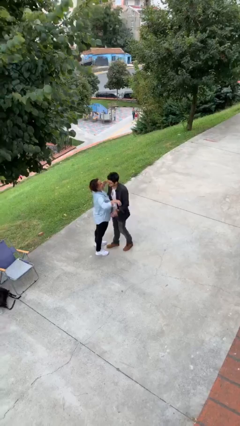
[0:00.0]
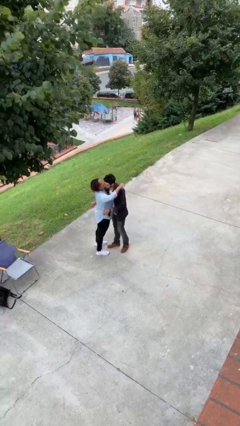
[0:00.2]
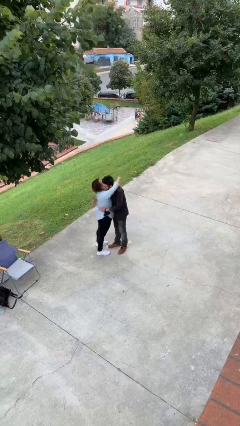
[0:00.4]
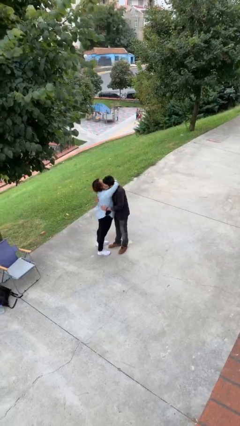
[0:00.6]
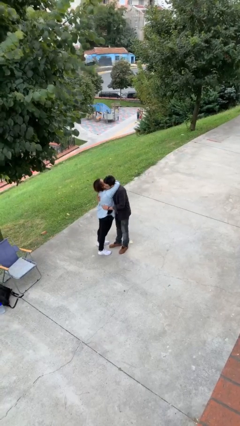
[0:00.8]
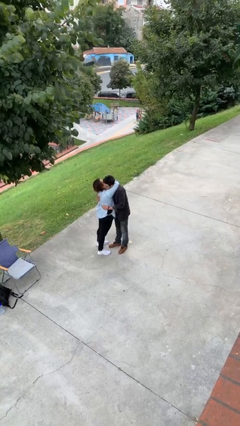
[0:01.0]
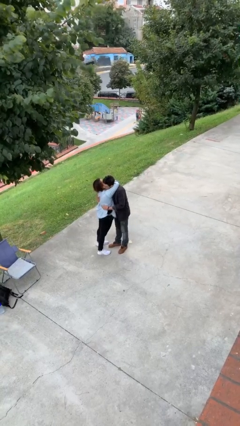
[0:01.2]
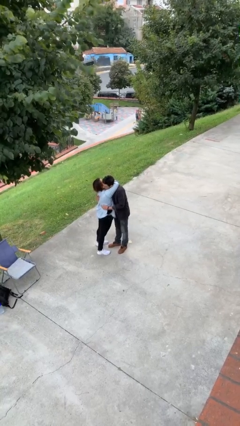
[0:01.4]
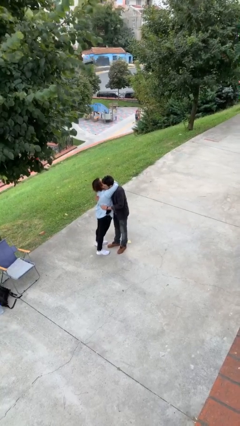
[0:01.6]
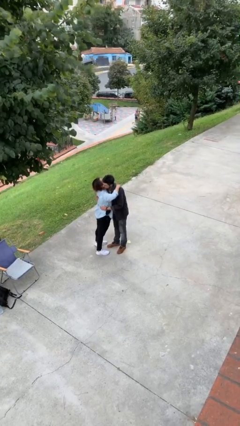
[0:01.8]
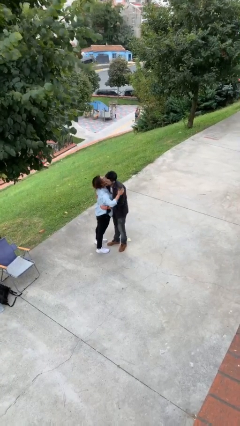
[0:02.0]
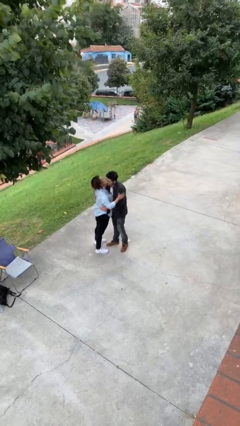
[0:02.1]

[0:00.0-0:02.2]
person embraces person

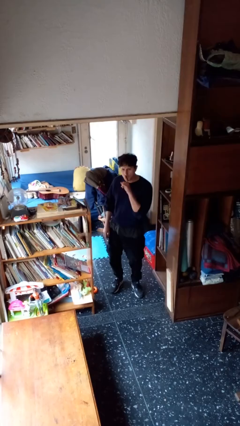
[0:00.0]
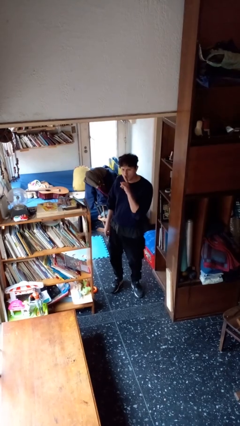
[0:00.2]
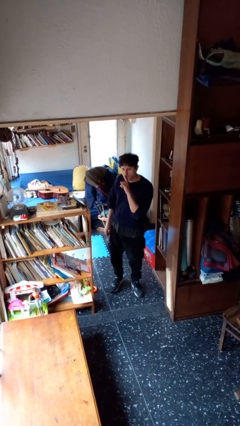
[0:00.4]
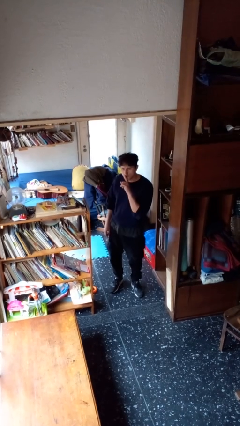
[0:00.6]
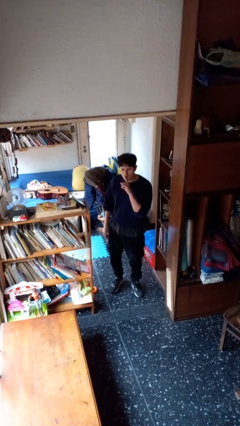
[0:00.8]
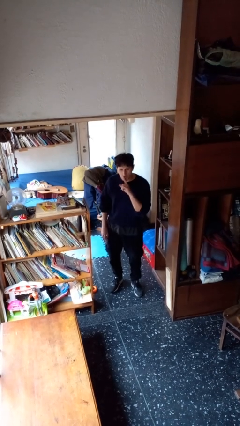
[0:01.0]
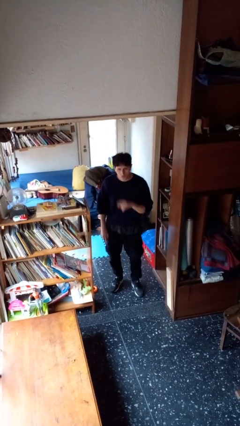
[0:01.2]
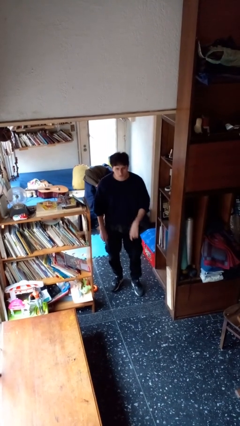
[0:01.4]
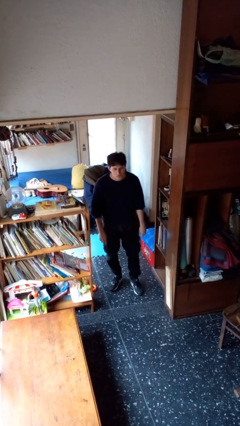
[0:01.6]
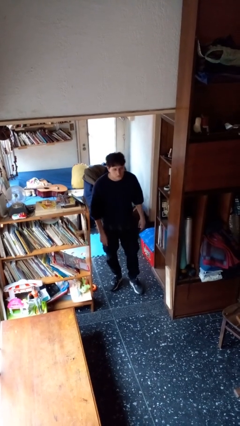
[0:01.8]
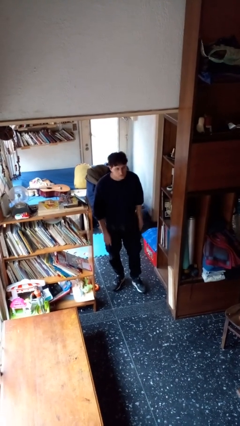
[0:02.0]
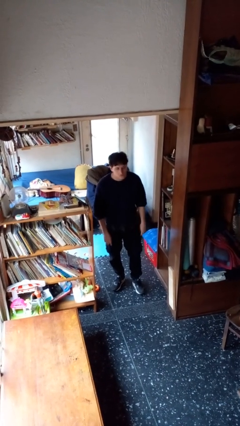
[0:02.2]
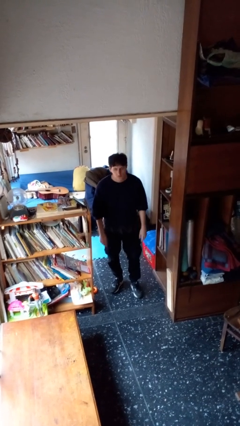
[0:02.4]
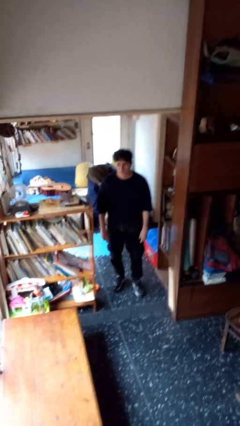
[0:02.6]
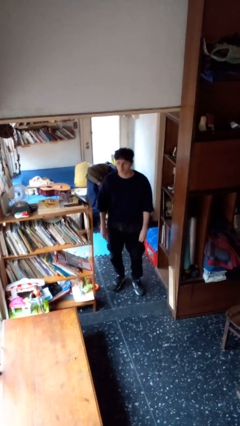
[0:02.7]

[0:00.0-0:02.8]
person gestures be quiet

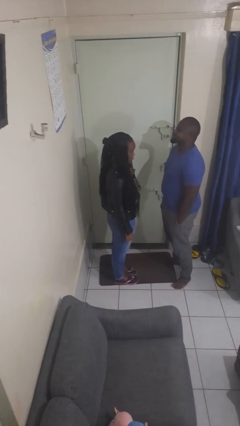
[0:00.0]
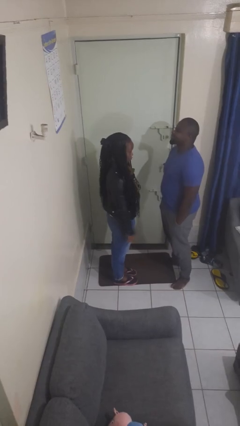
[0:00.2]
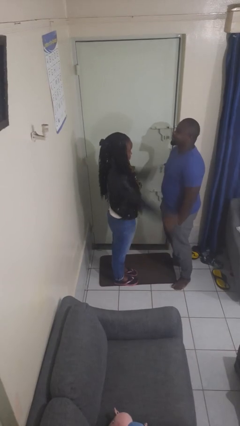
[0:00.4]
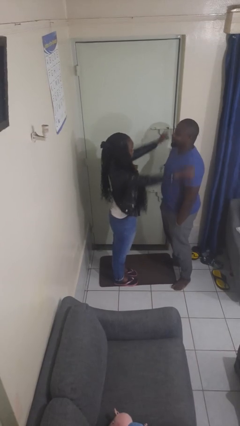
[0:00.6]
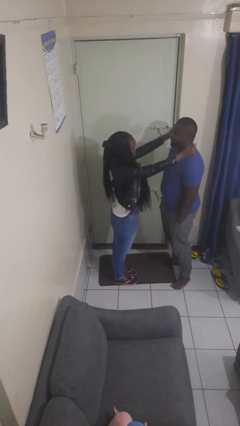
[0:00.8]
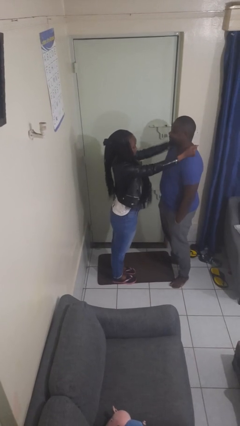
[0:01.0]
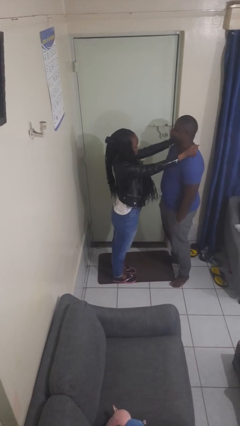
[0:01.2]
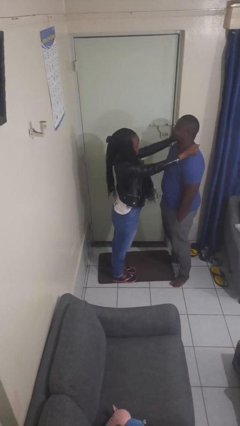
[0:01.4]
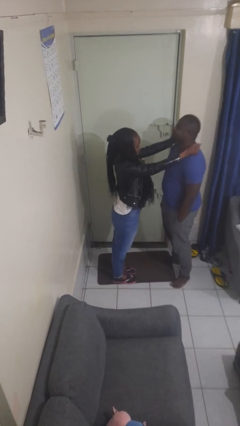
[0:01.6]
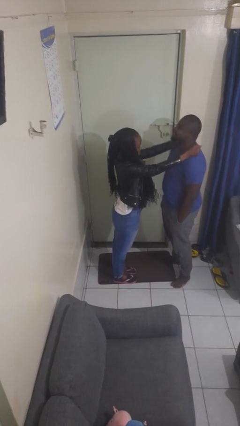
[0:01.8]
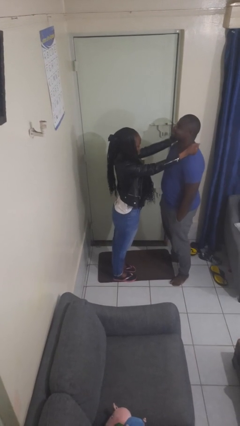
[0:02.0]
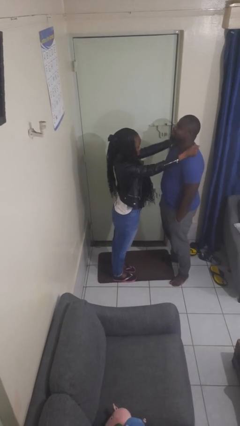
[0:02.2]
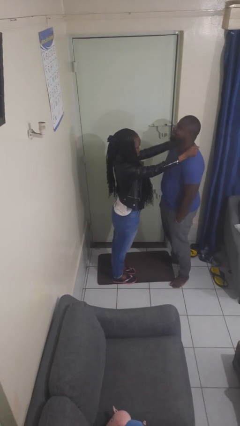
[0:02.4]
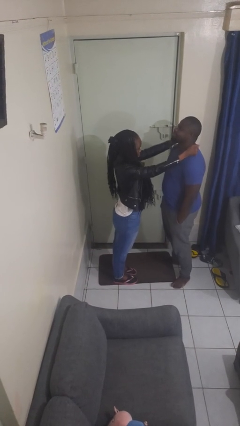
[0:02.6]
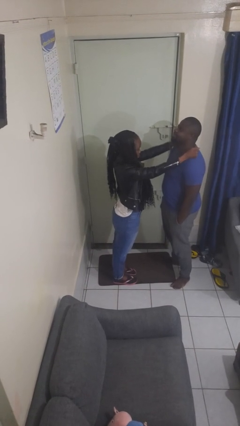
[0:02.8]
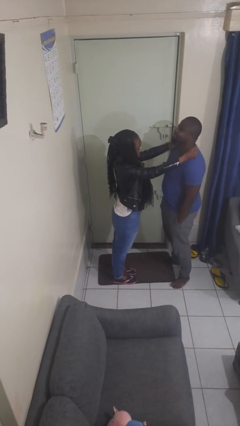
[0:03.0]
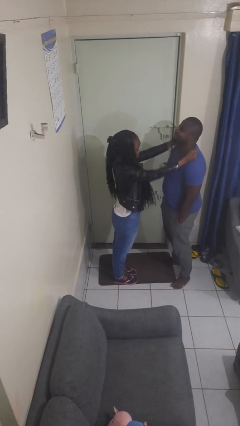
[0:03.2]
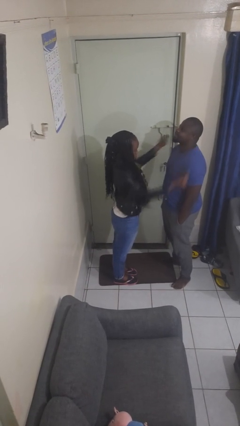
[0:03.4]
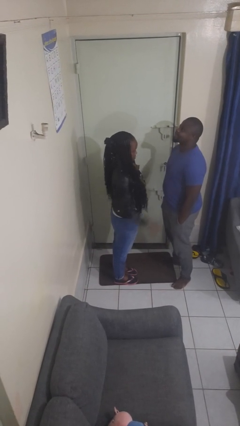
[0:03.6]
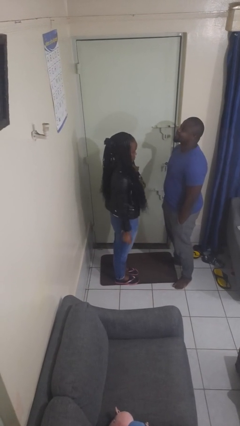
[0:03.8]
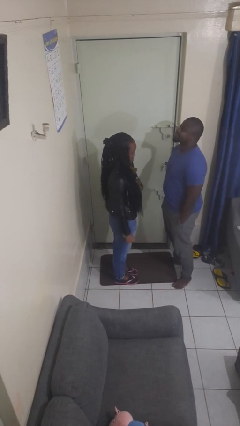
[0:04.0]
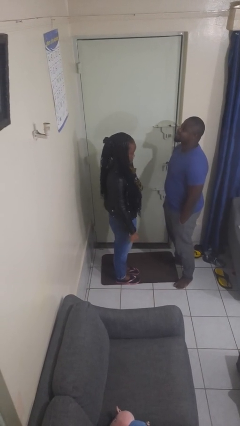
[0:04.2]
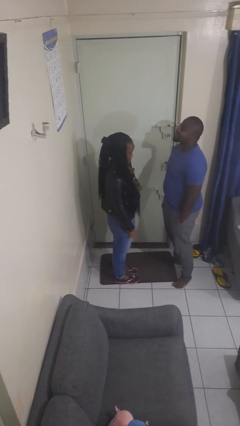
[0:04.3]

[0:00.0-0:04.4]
person pounds shoulders of person

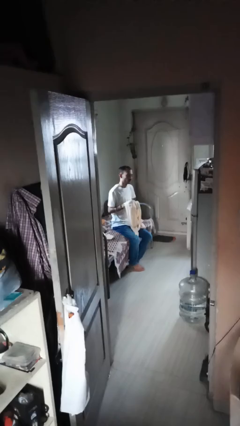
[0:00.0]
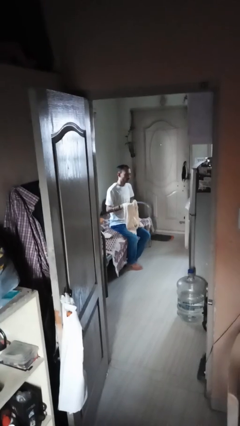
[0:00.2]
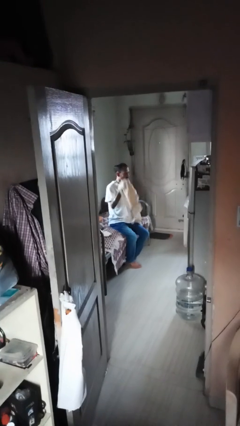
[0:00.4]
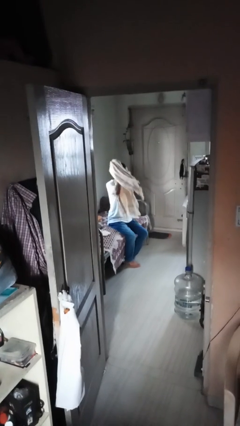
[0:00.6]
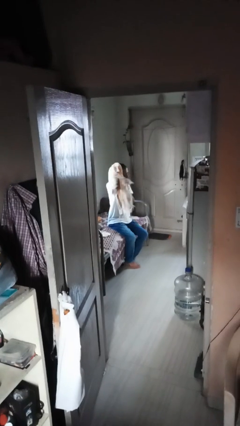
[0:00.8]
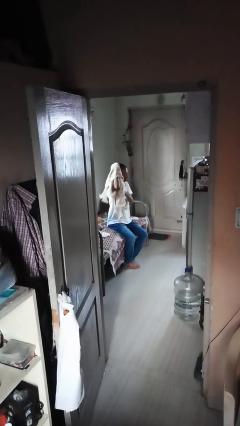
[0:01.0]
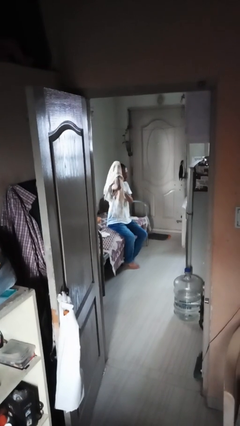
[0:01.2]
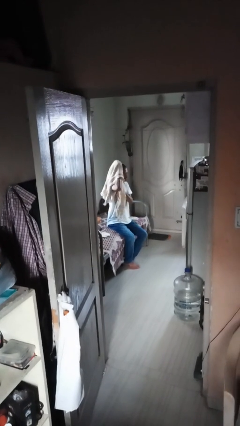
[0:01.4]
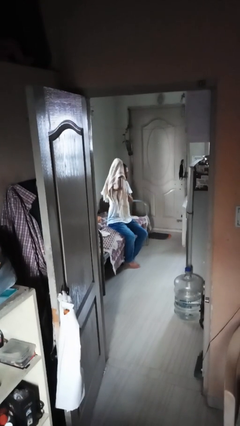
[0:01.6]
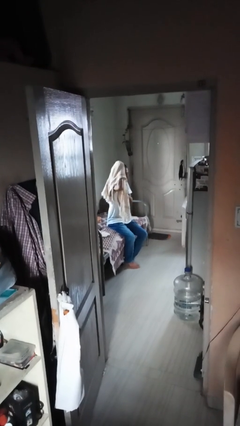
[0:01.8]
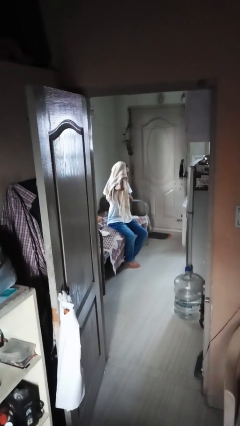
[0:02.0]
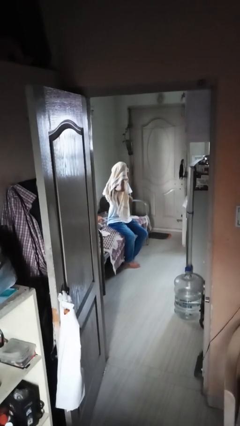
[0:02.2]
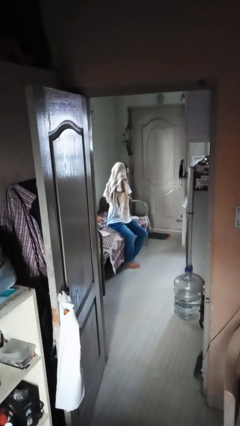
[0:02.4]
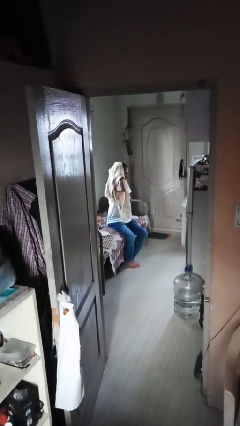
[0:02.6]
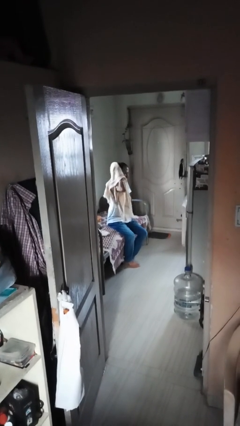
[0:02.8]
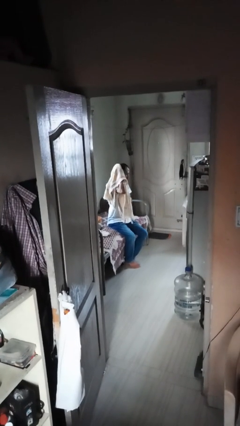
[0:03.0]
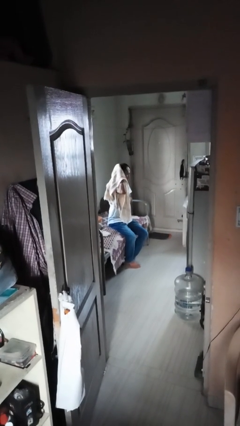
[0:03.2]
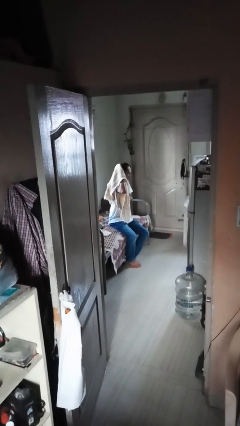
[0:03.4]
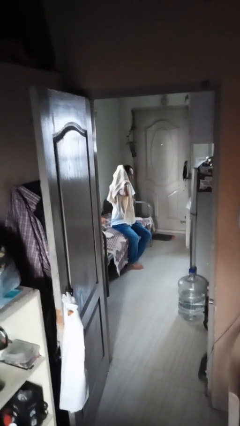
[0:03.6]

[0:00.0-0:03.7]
person dries hair with towel

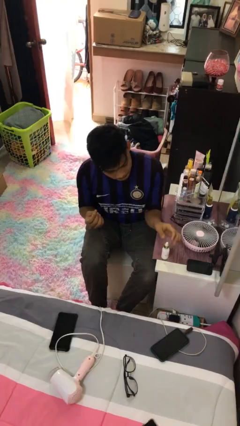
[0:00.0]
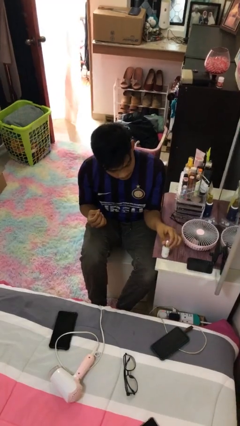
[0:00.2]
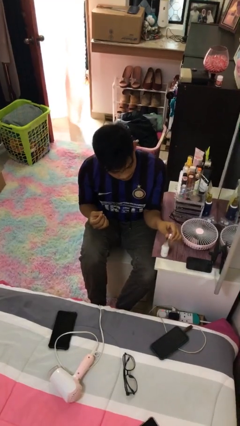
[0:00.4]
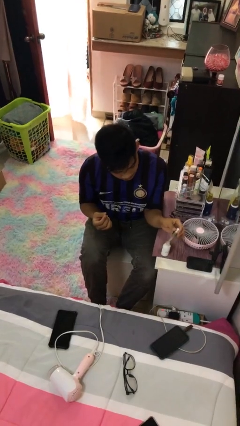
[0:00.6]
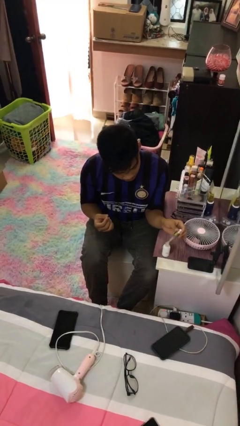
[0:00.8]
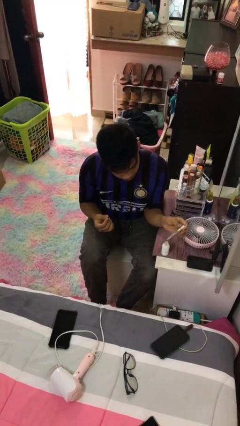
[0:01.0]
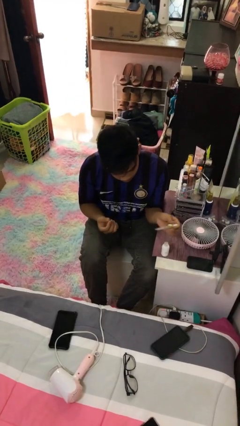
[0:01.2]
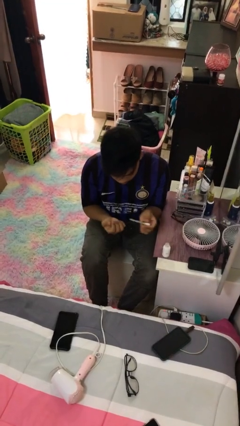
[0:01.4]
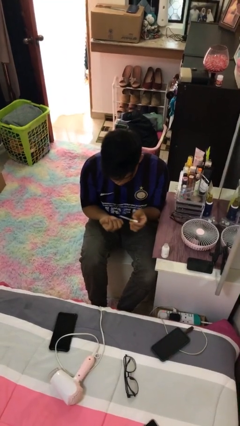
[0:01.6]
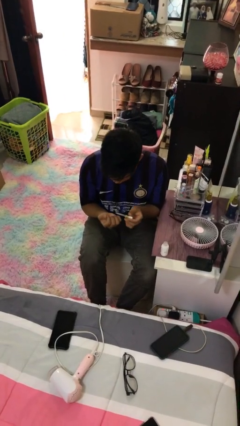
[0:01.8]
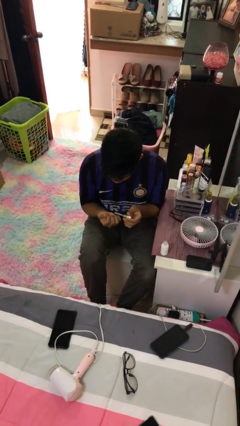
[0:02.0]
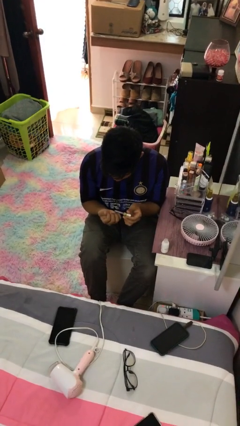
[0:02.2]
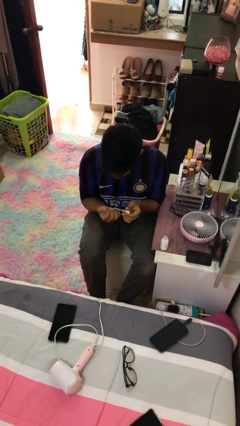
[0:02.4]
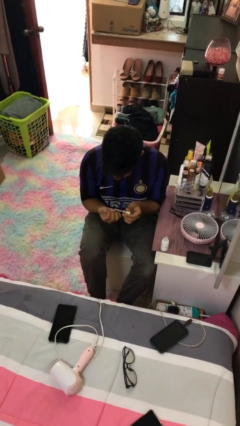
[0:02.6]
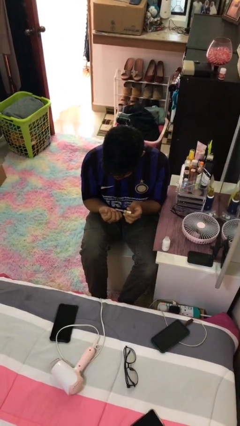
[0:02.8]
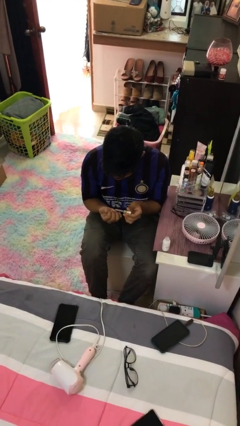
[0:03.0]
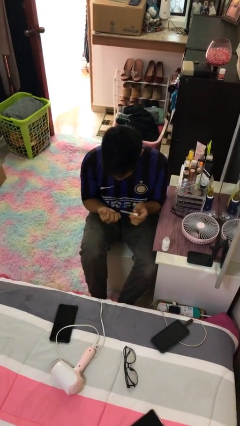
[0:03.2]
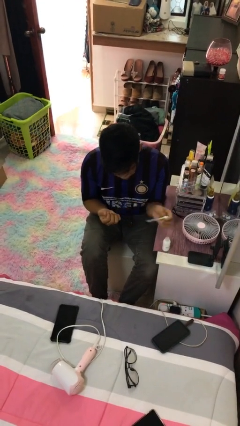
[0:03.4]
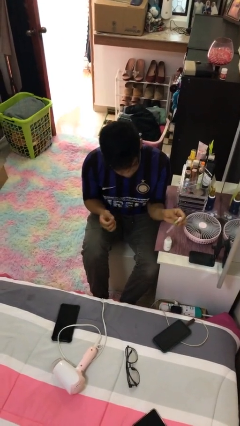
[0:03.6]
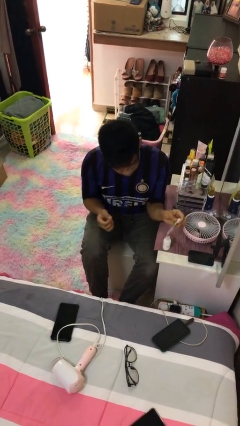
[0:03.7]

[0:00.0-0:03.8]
person paints fingernails

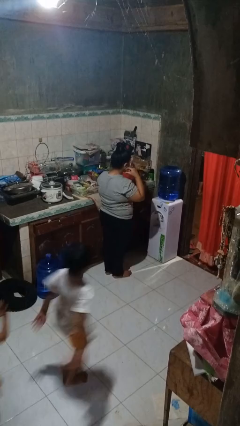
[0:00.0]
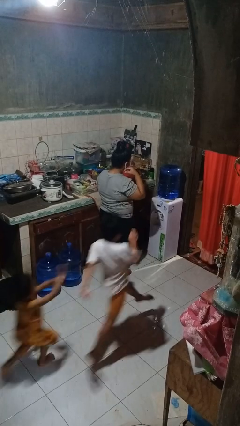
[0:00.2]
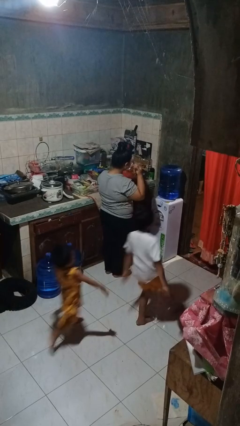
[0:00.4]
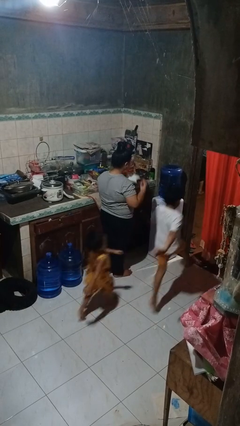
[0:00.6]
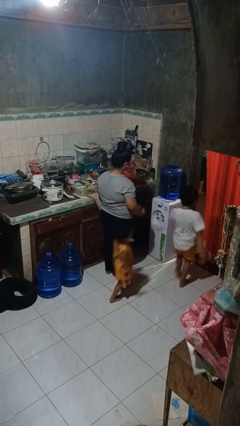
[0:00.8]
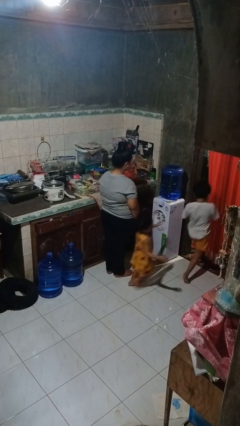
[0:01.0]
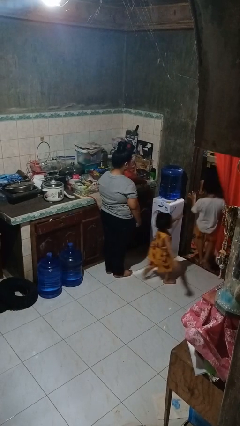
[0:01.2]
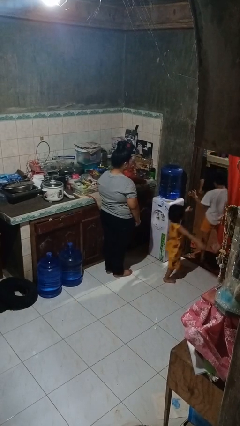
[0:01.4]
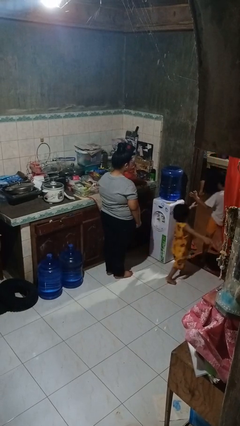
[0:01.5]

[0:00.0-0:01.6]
person takes off facemask
